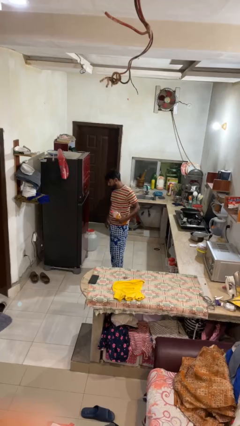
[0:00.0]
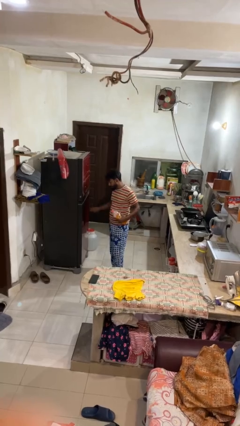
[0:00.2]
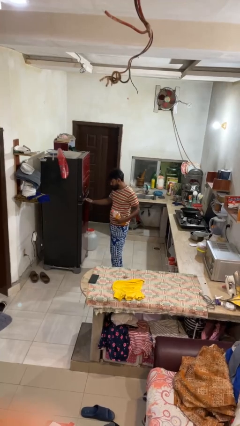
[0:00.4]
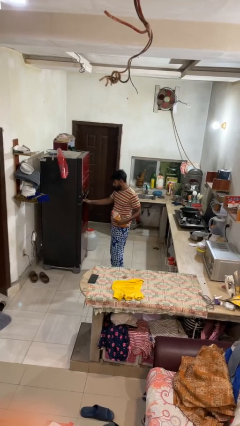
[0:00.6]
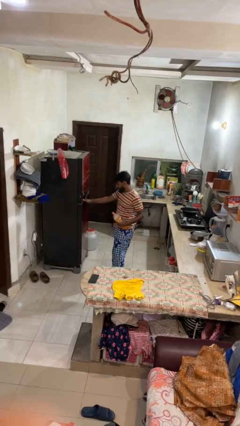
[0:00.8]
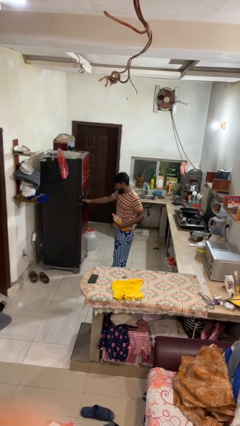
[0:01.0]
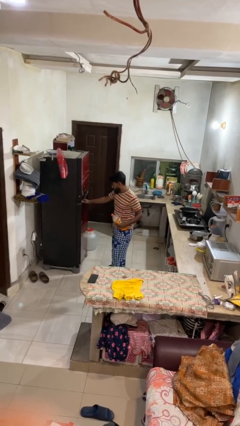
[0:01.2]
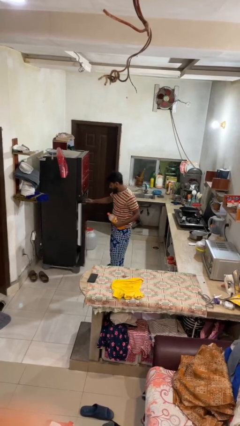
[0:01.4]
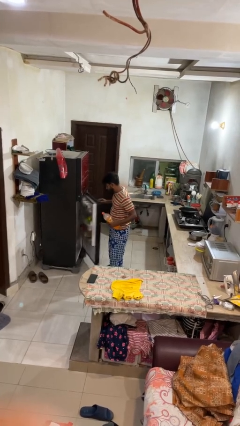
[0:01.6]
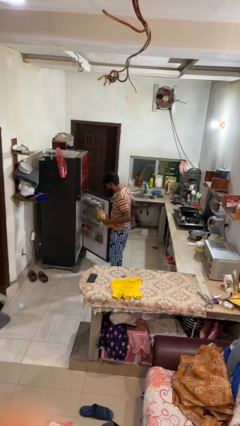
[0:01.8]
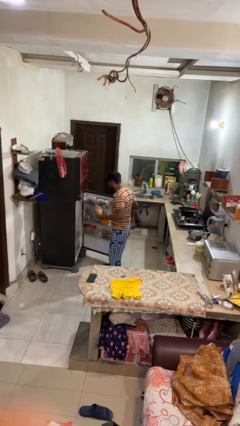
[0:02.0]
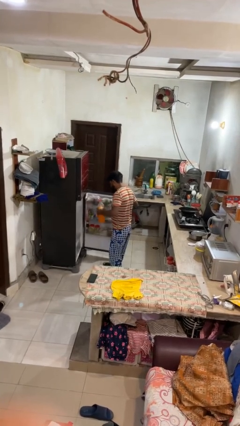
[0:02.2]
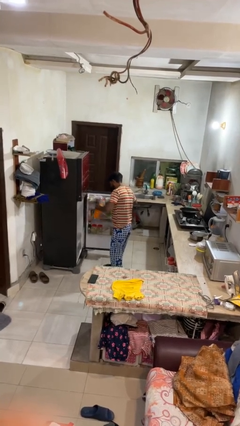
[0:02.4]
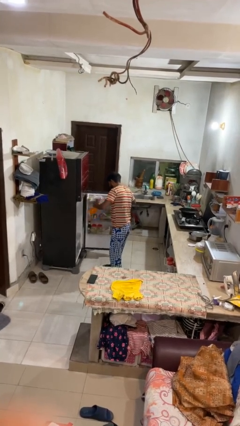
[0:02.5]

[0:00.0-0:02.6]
person opens refrigerator

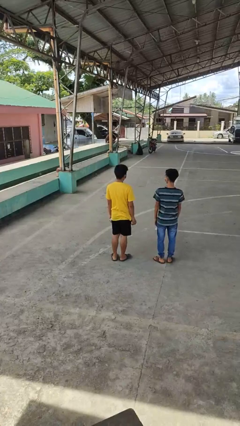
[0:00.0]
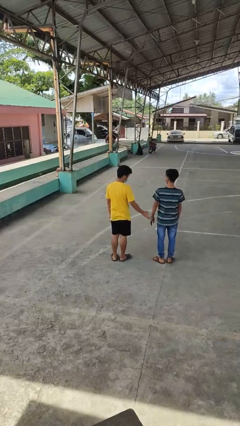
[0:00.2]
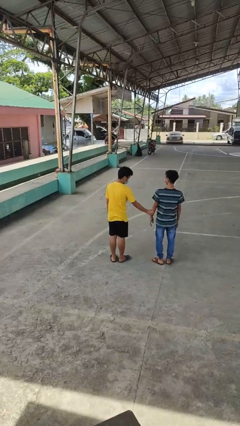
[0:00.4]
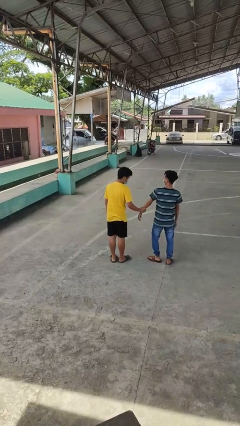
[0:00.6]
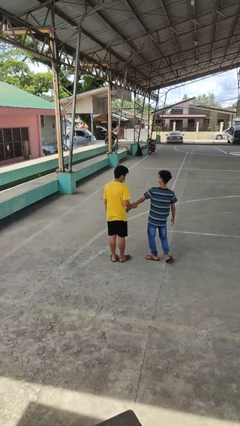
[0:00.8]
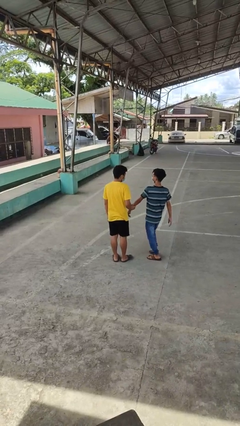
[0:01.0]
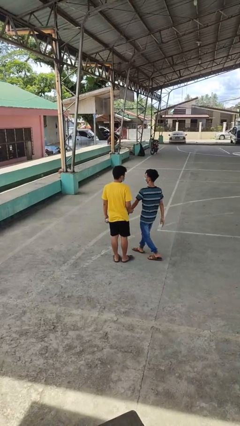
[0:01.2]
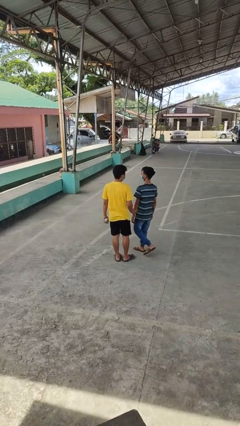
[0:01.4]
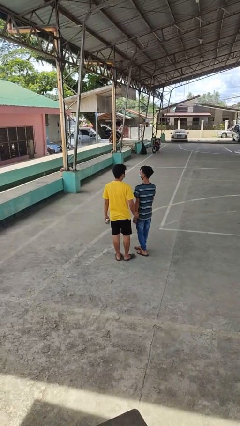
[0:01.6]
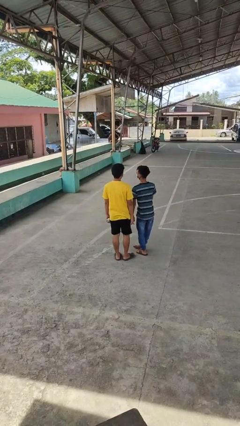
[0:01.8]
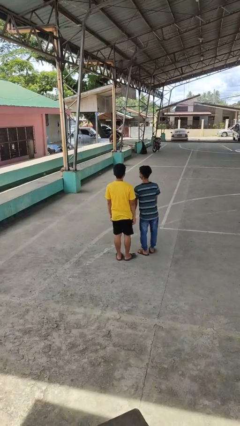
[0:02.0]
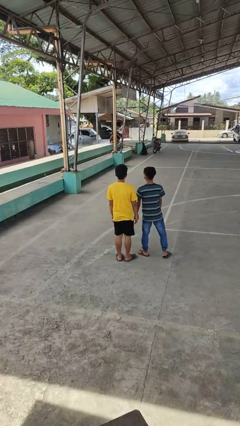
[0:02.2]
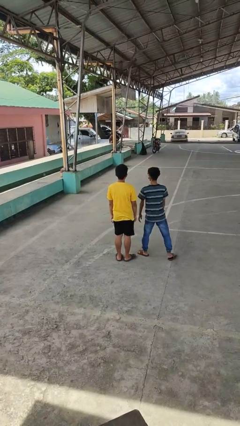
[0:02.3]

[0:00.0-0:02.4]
person grabs person by forearm

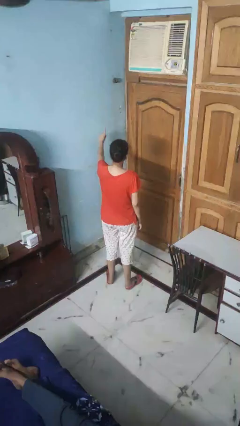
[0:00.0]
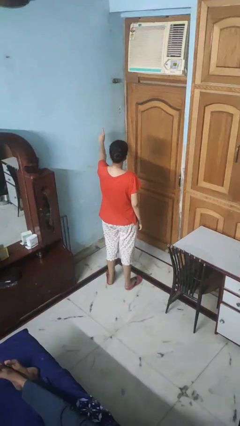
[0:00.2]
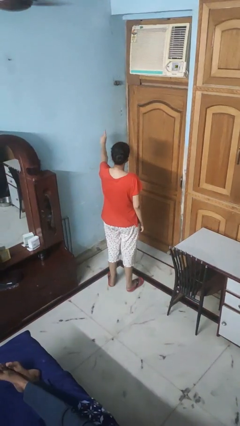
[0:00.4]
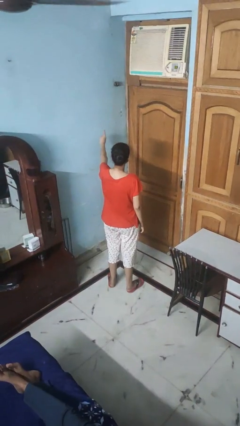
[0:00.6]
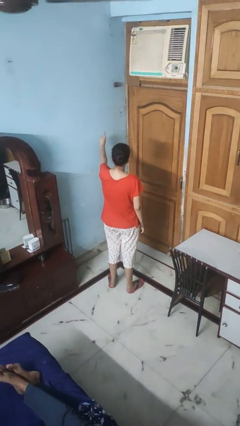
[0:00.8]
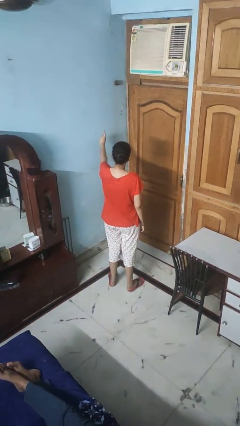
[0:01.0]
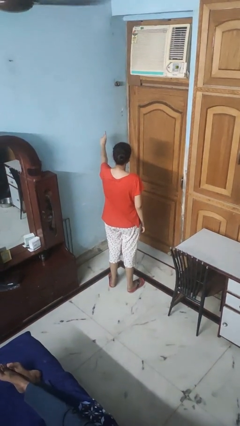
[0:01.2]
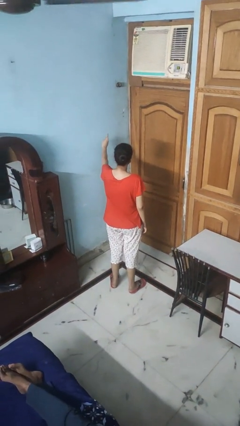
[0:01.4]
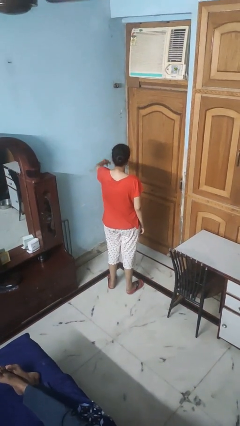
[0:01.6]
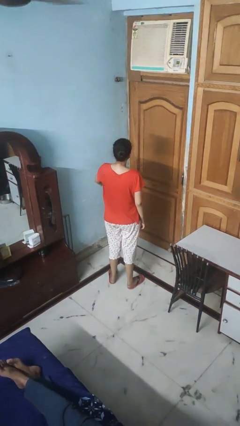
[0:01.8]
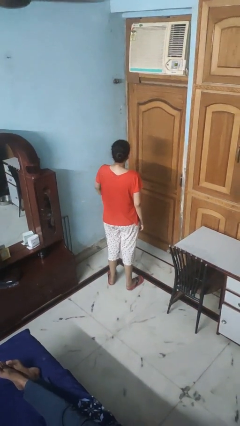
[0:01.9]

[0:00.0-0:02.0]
person gestures number one

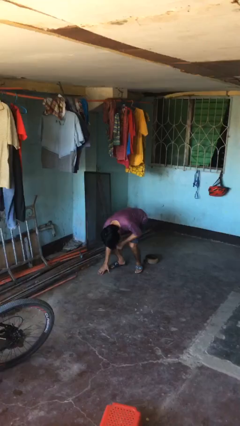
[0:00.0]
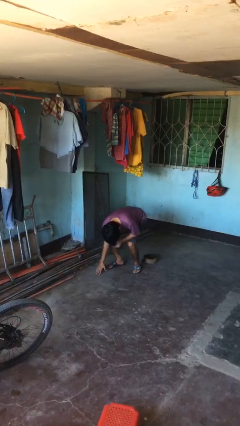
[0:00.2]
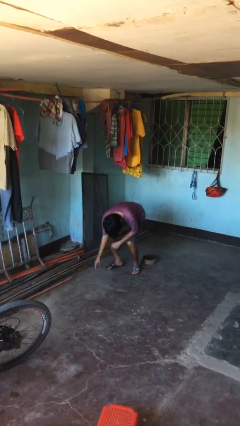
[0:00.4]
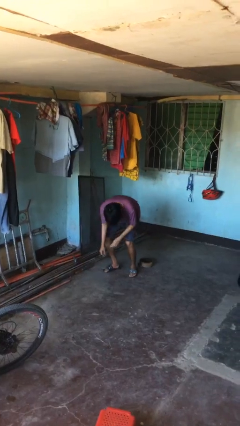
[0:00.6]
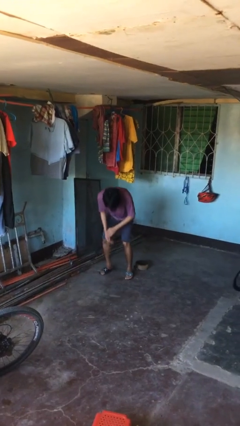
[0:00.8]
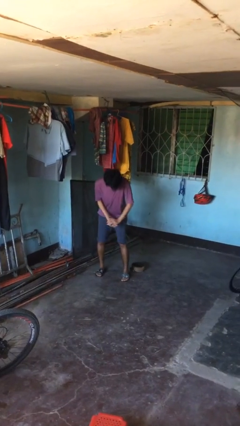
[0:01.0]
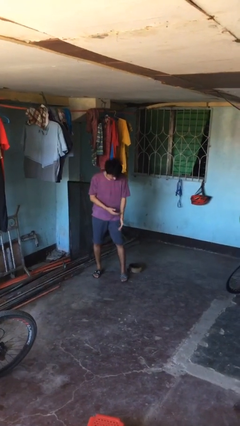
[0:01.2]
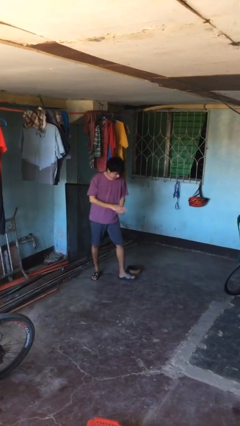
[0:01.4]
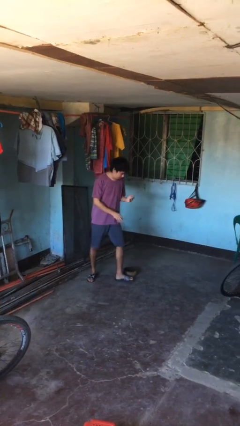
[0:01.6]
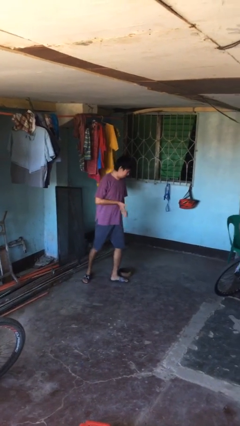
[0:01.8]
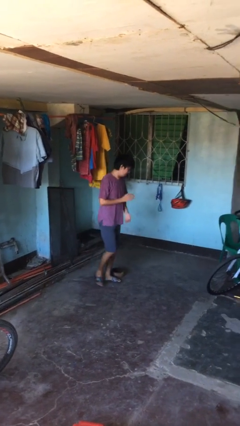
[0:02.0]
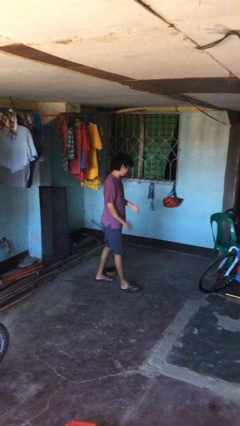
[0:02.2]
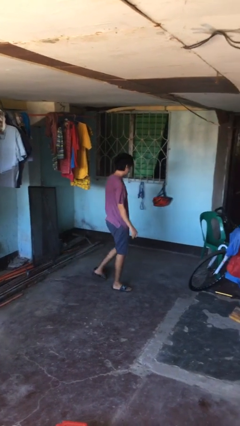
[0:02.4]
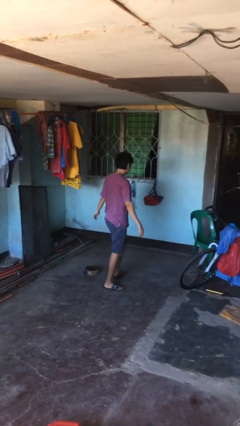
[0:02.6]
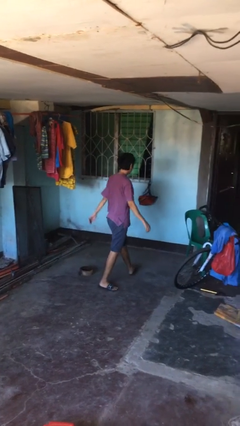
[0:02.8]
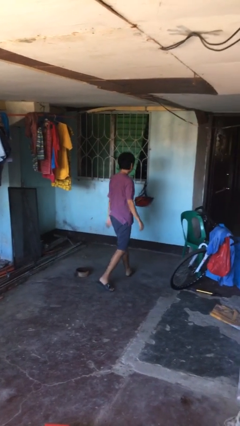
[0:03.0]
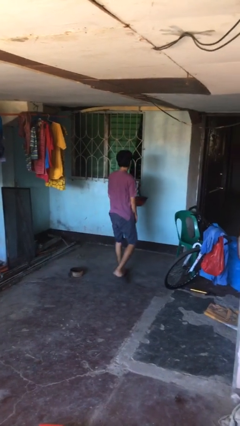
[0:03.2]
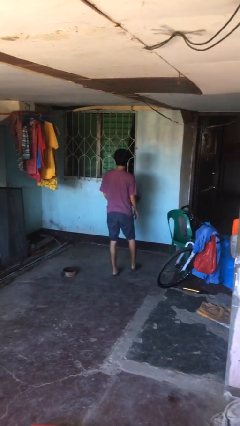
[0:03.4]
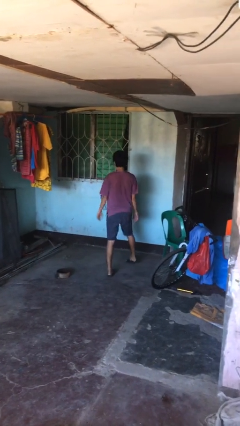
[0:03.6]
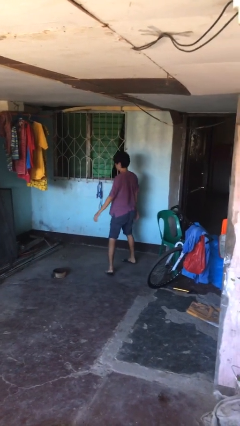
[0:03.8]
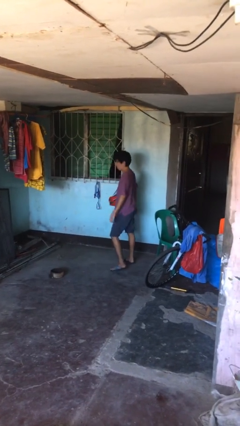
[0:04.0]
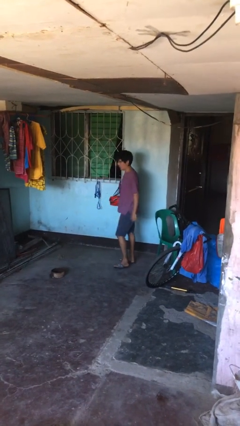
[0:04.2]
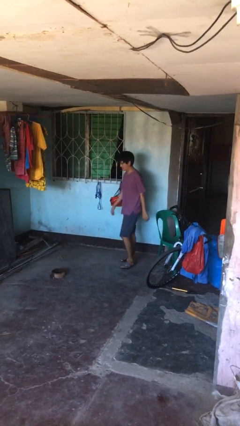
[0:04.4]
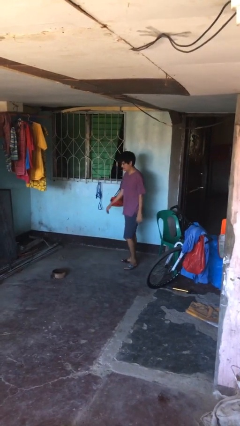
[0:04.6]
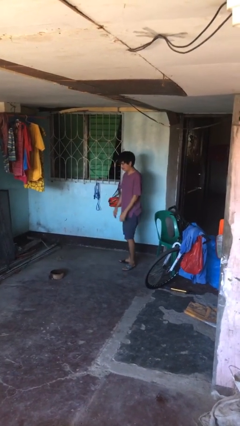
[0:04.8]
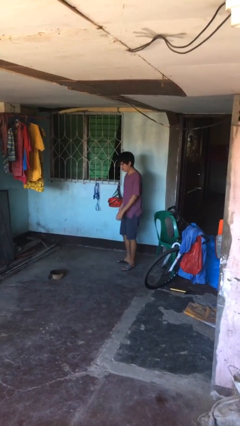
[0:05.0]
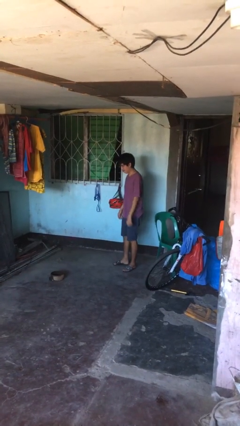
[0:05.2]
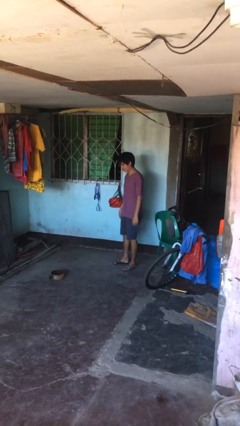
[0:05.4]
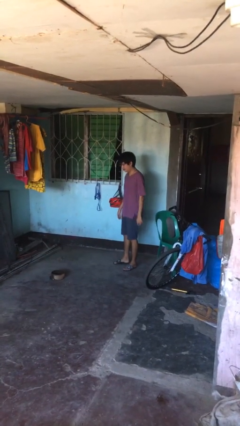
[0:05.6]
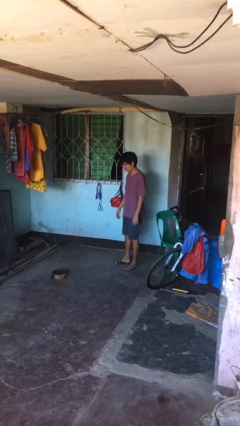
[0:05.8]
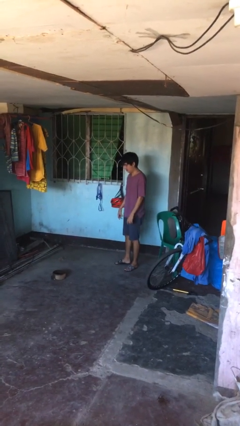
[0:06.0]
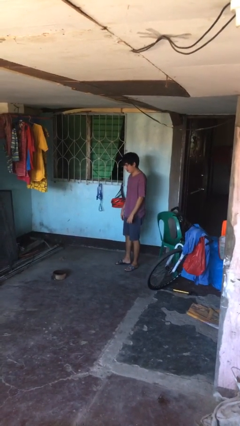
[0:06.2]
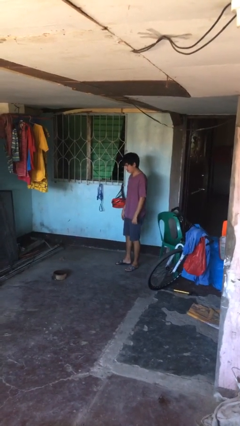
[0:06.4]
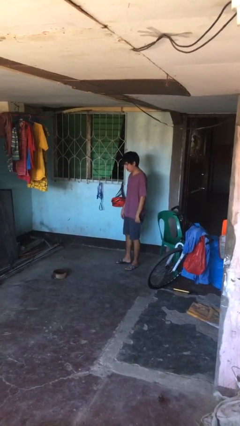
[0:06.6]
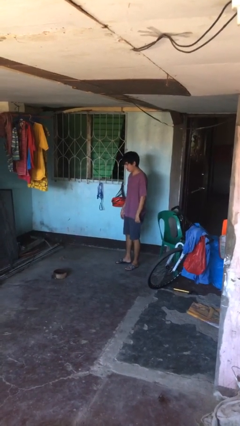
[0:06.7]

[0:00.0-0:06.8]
person stands up from floor

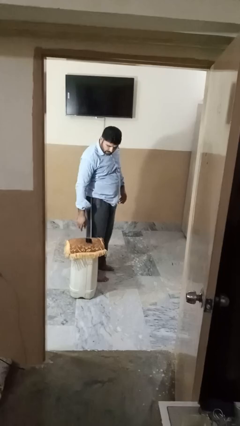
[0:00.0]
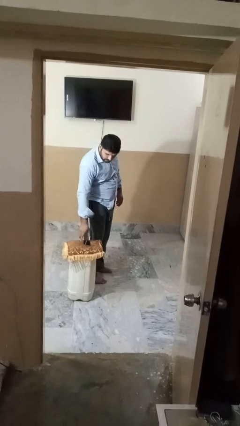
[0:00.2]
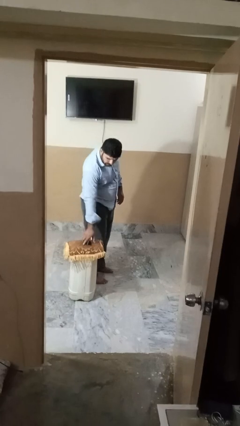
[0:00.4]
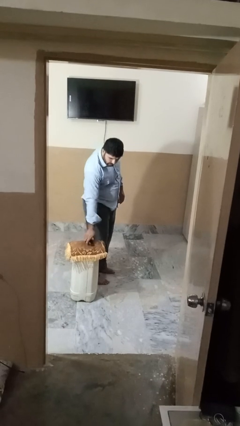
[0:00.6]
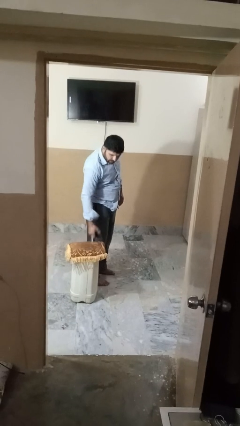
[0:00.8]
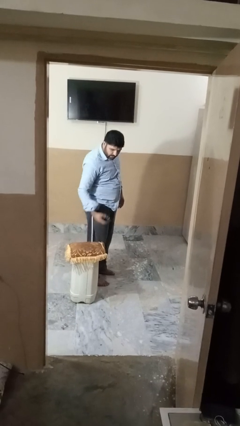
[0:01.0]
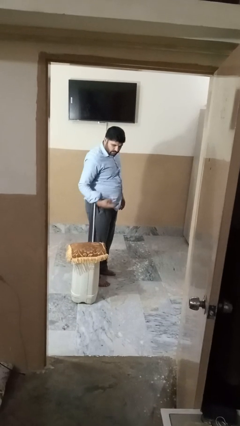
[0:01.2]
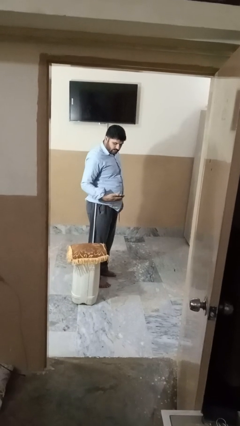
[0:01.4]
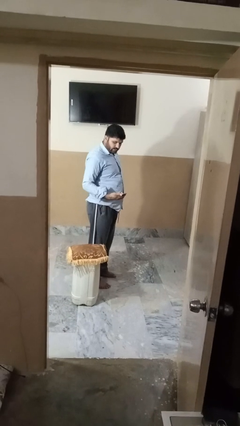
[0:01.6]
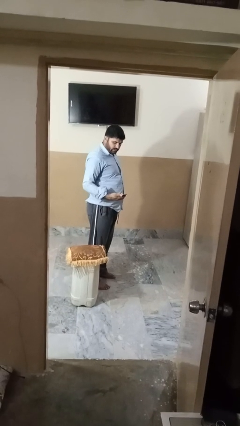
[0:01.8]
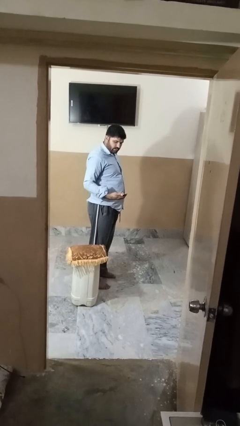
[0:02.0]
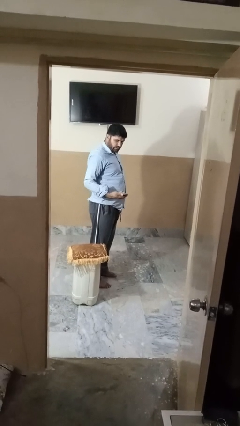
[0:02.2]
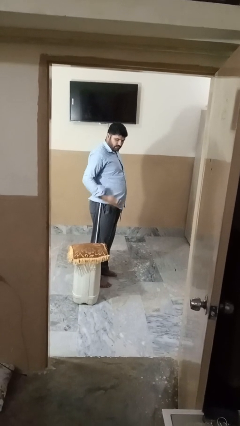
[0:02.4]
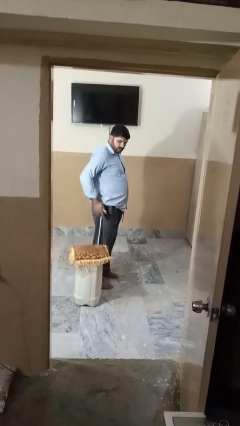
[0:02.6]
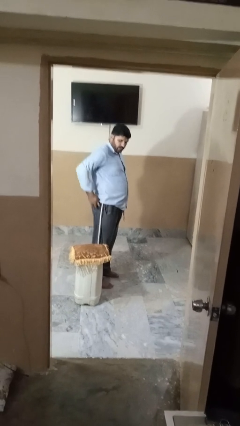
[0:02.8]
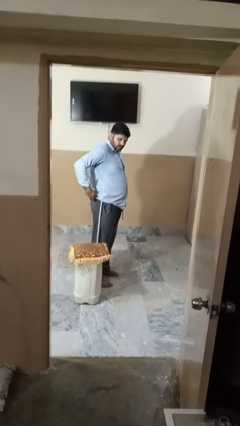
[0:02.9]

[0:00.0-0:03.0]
person takes phone from pocket

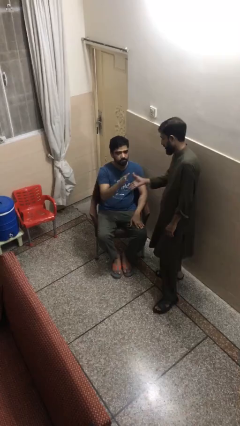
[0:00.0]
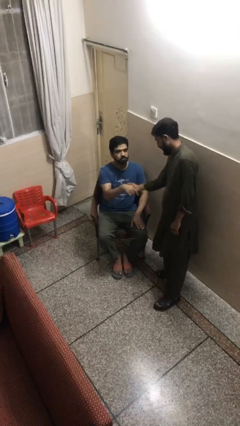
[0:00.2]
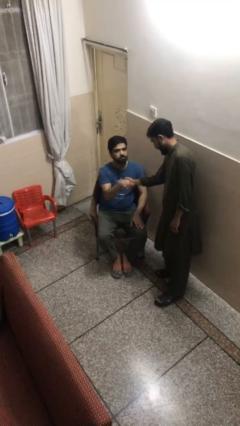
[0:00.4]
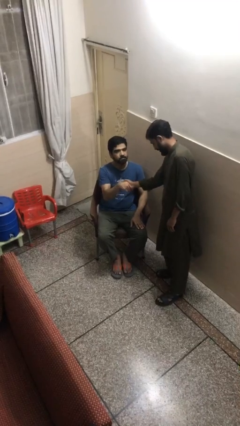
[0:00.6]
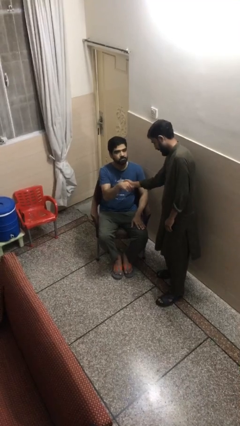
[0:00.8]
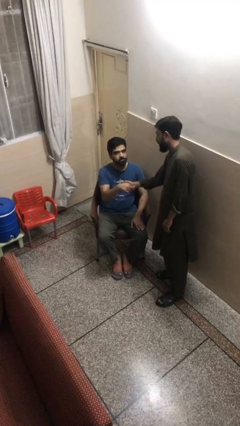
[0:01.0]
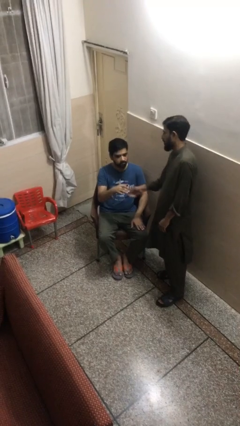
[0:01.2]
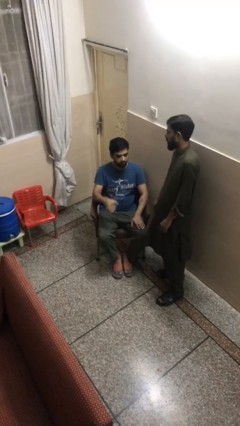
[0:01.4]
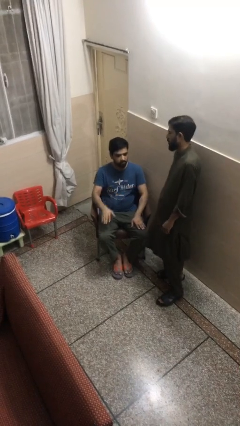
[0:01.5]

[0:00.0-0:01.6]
person shakes hand
